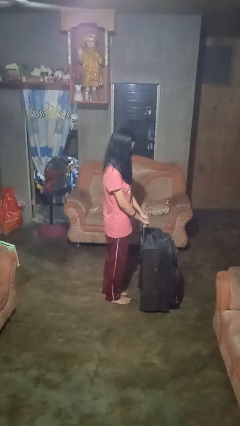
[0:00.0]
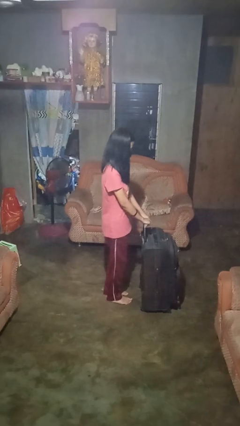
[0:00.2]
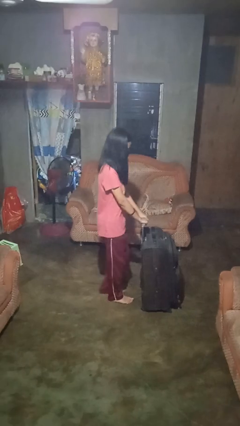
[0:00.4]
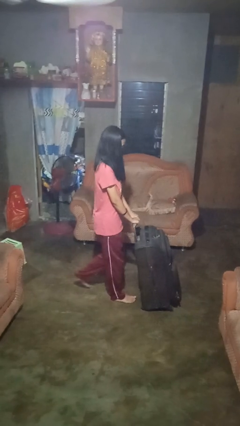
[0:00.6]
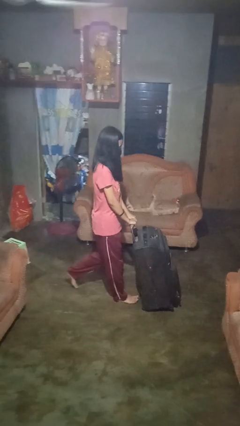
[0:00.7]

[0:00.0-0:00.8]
person pulls wheeled cart

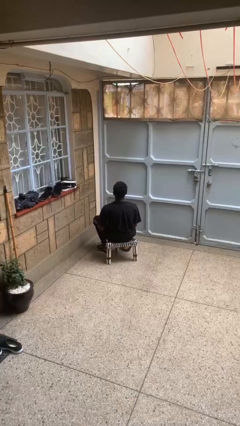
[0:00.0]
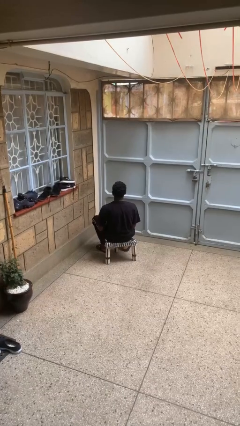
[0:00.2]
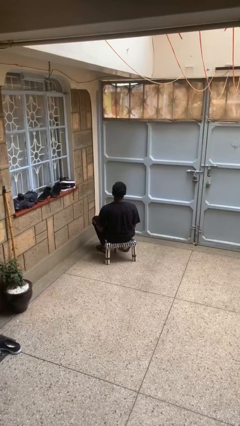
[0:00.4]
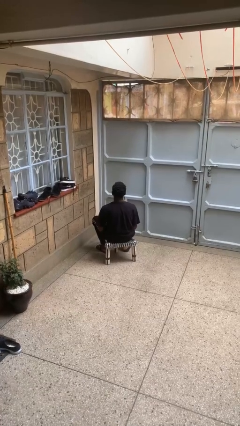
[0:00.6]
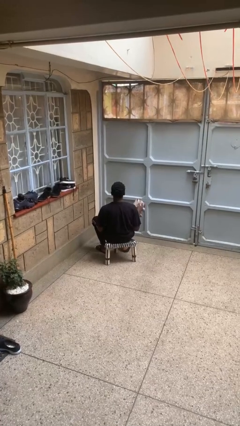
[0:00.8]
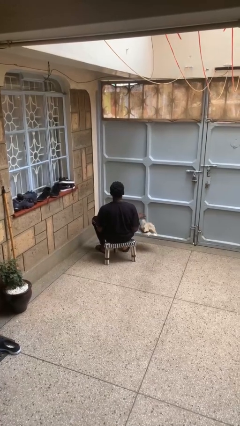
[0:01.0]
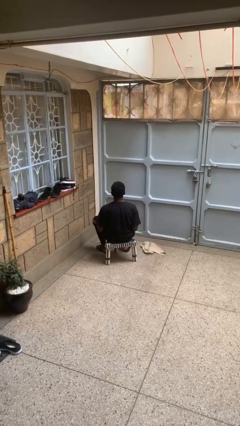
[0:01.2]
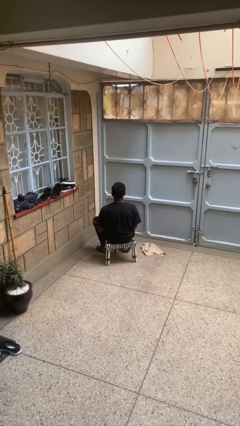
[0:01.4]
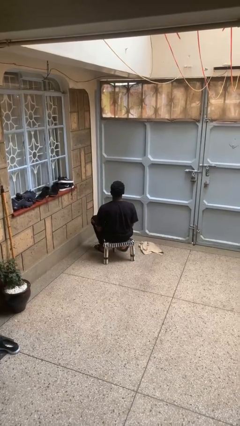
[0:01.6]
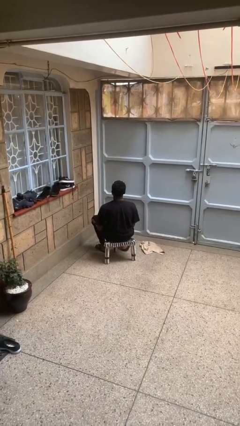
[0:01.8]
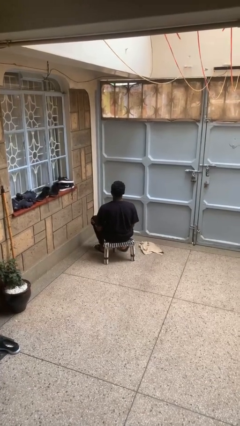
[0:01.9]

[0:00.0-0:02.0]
person throws object to ground

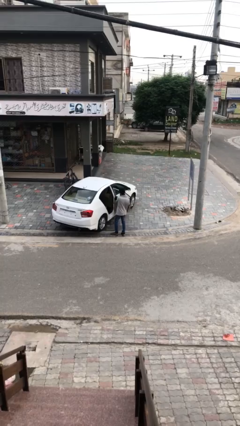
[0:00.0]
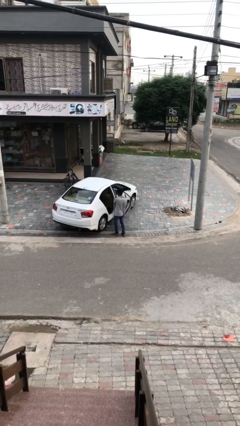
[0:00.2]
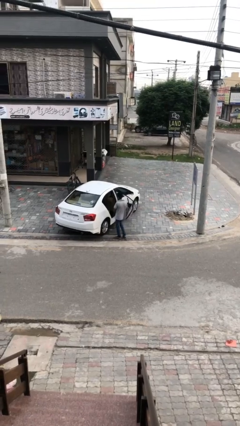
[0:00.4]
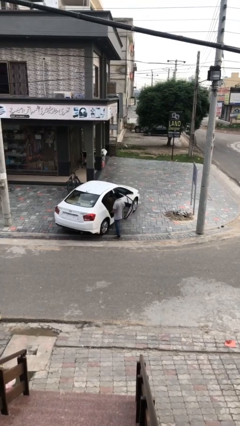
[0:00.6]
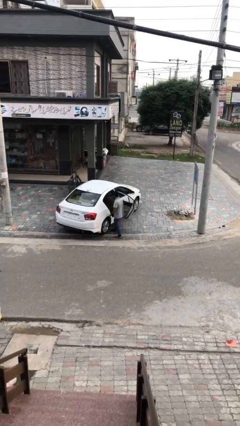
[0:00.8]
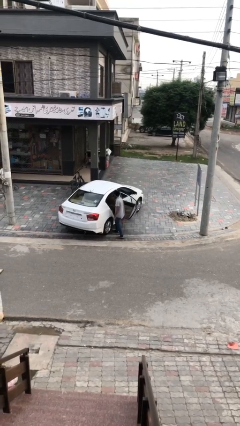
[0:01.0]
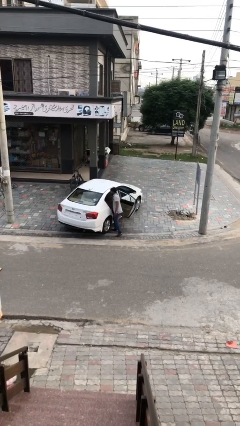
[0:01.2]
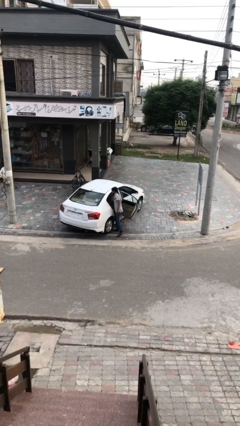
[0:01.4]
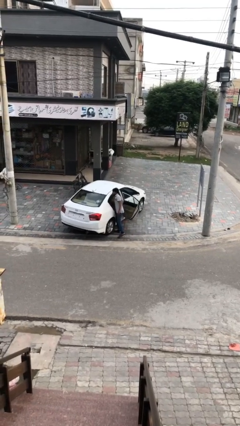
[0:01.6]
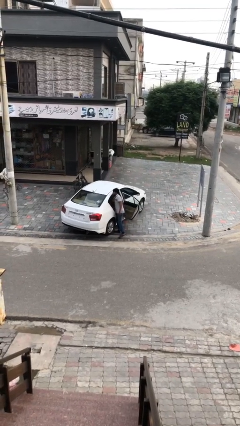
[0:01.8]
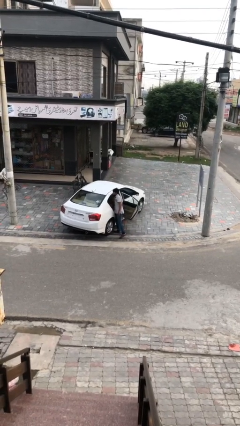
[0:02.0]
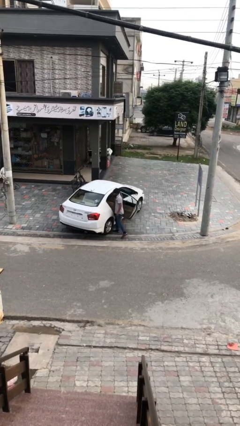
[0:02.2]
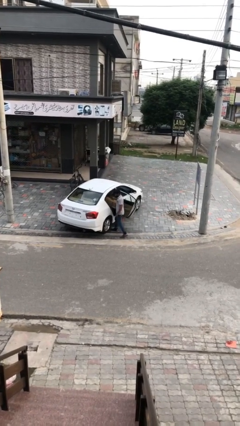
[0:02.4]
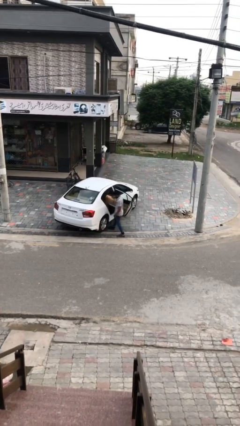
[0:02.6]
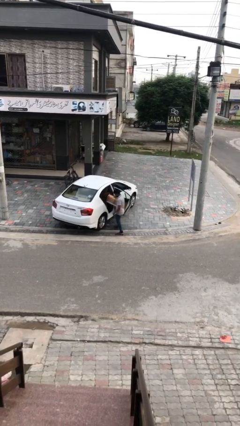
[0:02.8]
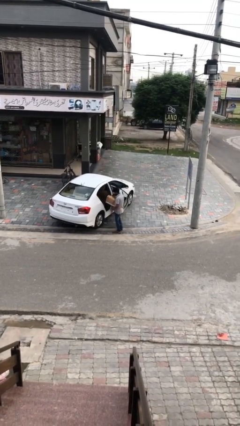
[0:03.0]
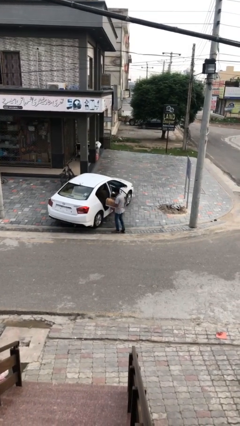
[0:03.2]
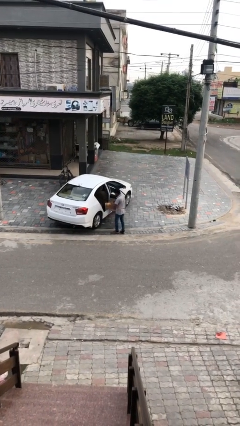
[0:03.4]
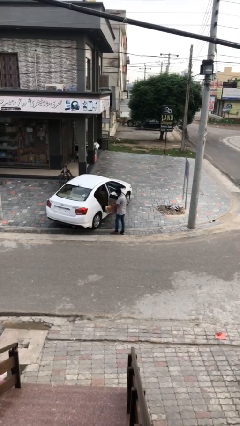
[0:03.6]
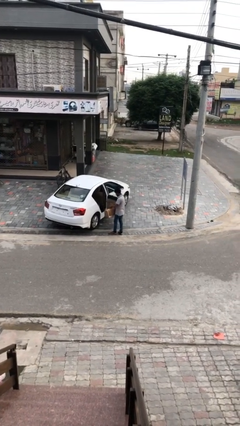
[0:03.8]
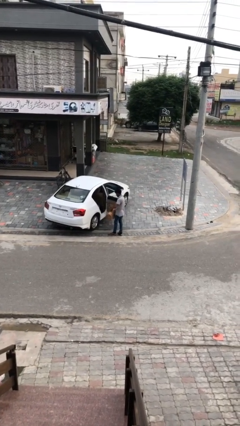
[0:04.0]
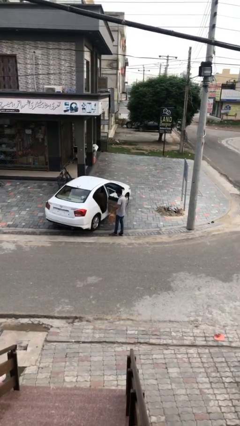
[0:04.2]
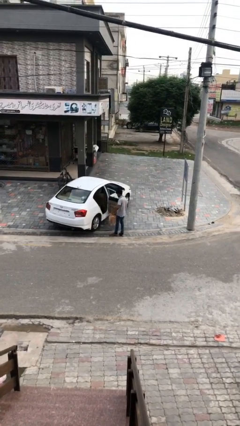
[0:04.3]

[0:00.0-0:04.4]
person unloads car

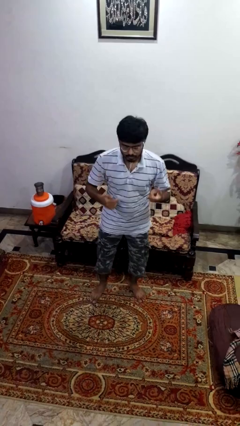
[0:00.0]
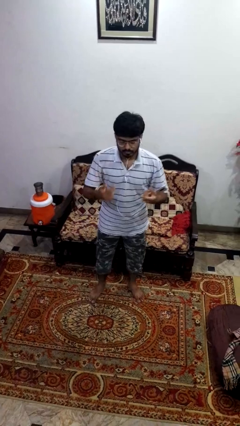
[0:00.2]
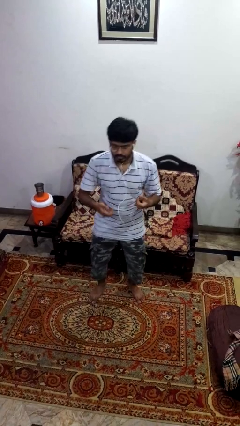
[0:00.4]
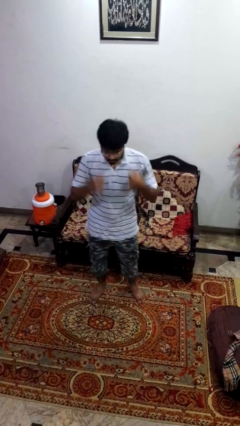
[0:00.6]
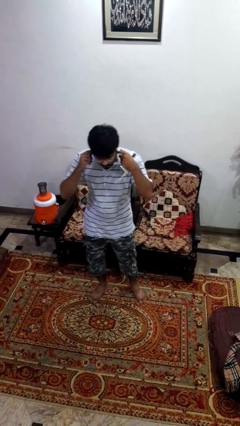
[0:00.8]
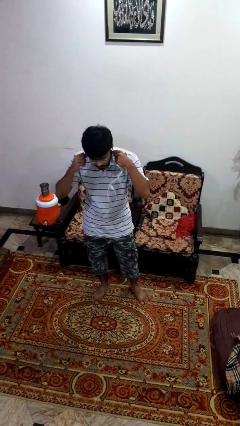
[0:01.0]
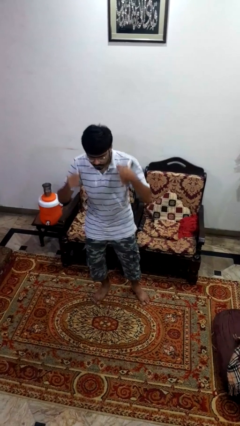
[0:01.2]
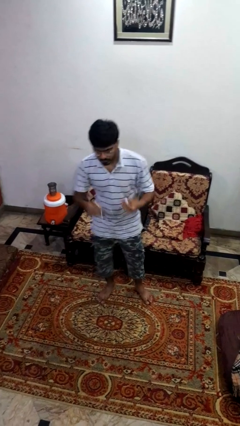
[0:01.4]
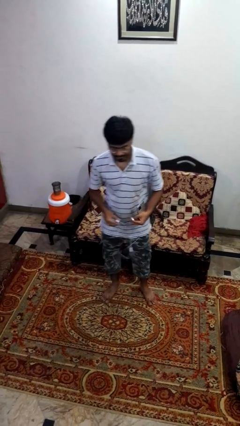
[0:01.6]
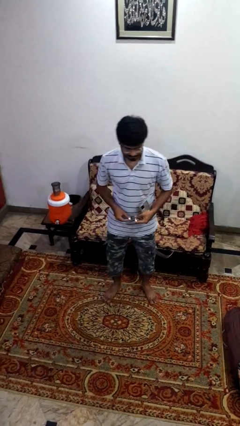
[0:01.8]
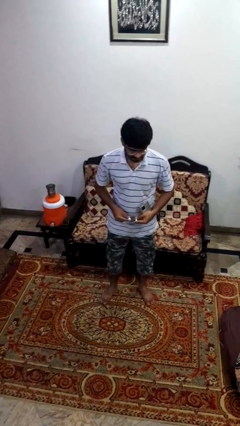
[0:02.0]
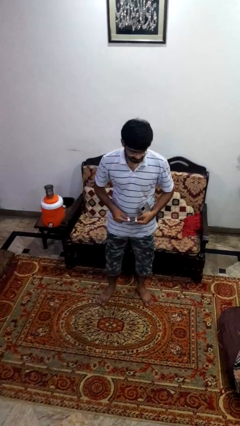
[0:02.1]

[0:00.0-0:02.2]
person takes off headphones

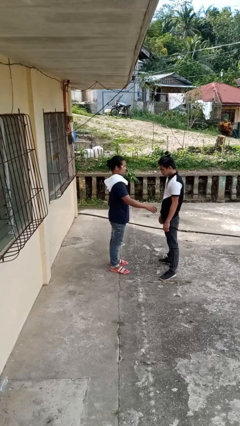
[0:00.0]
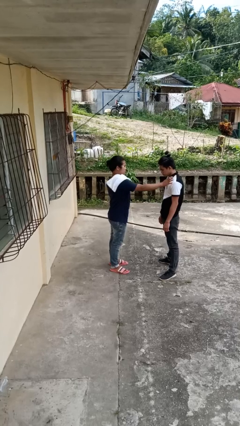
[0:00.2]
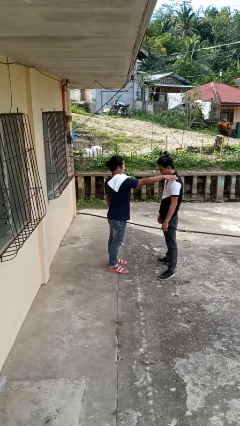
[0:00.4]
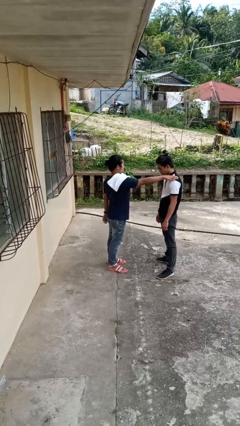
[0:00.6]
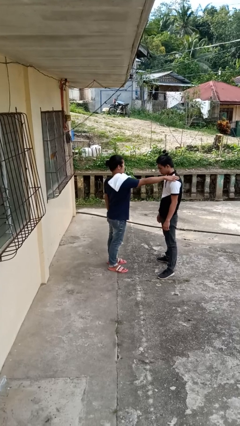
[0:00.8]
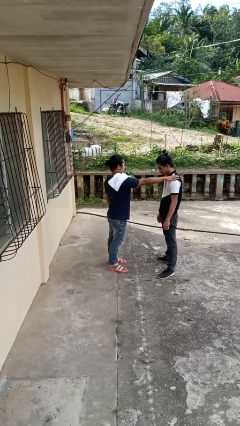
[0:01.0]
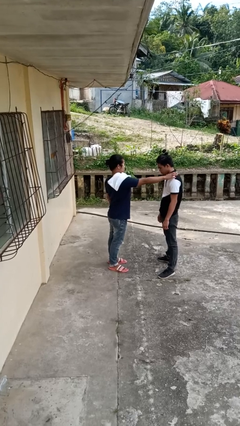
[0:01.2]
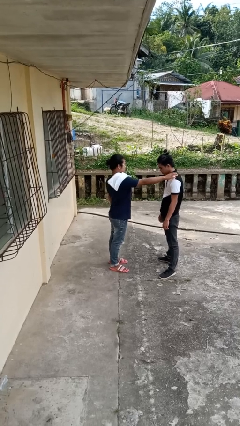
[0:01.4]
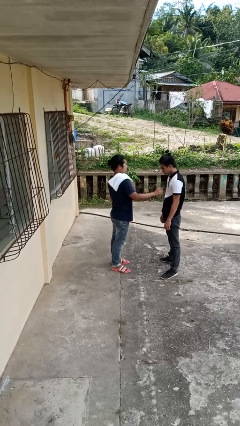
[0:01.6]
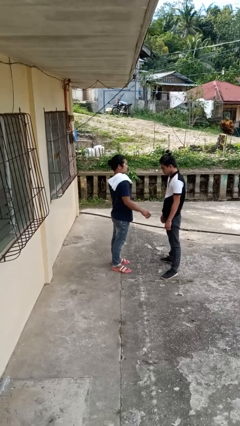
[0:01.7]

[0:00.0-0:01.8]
person pounds shoulders of person

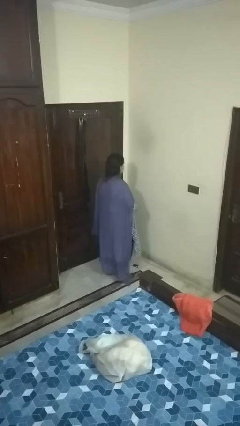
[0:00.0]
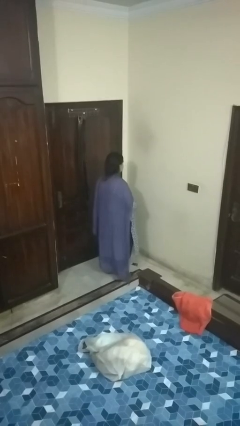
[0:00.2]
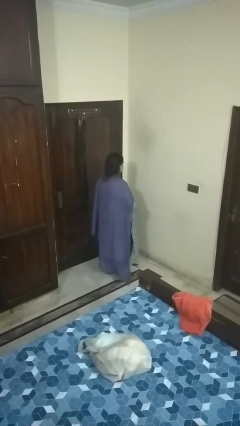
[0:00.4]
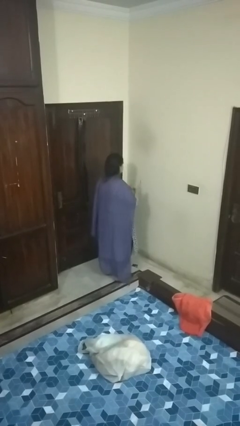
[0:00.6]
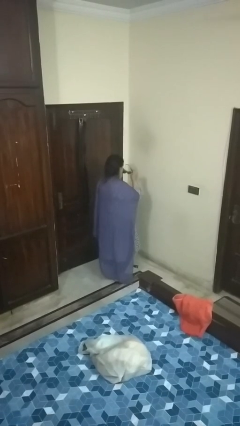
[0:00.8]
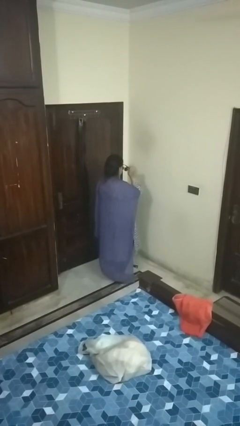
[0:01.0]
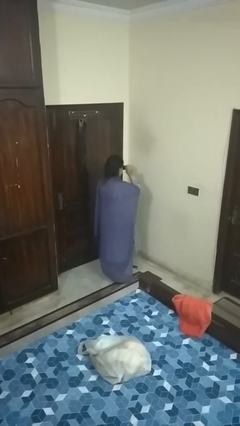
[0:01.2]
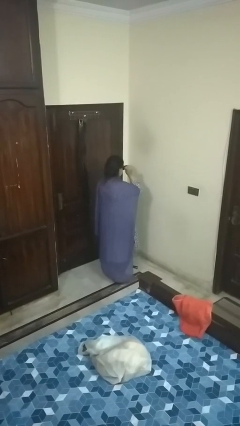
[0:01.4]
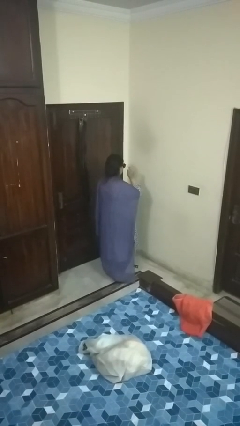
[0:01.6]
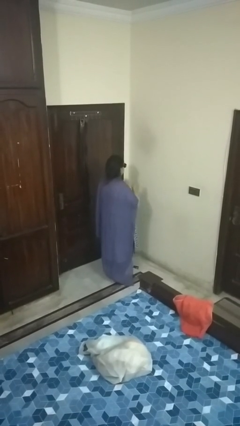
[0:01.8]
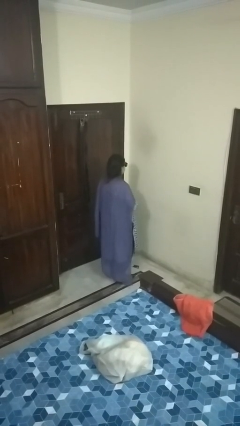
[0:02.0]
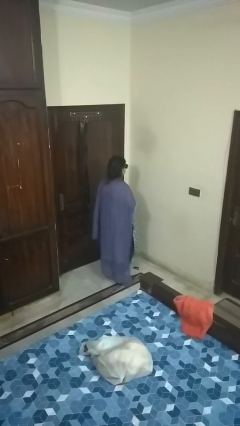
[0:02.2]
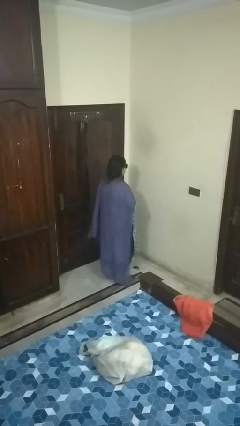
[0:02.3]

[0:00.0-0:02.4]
person puts on sunglasses

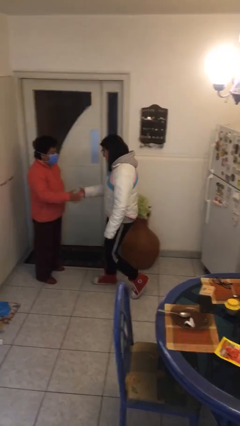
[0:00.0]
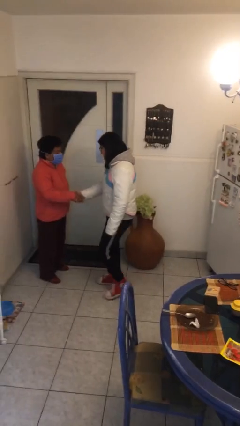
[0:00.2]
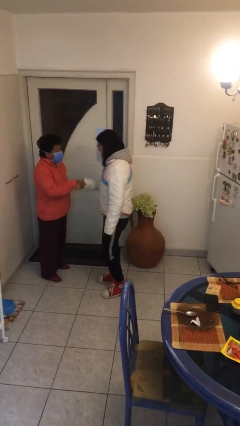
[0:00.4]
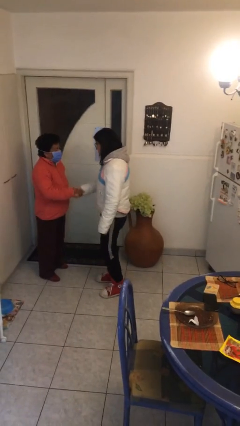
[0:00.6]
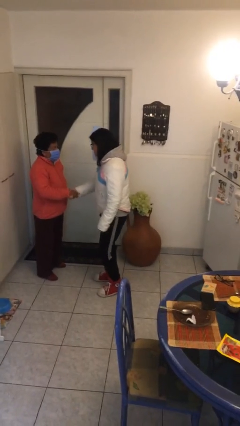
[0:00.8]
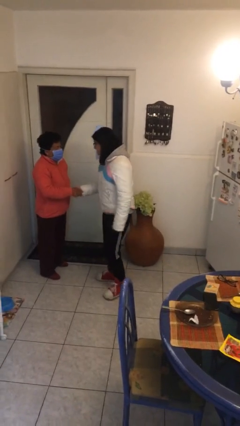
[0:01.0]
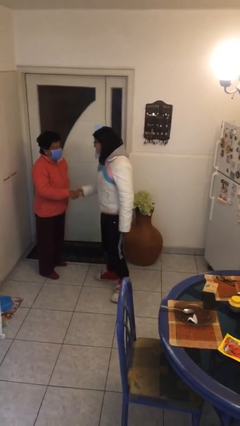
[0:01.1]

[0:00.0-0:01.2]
person shakes hand

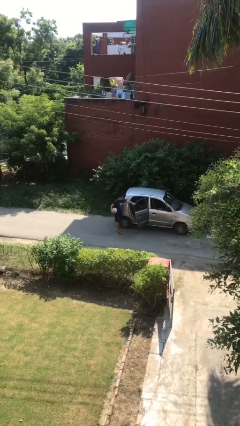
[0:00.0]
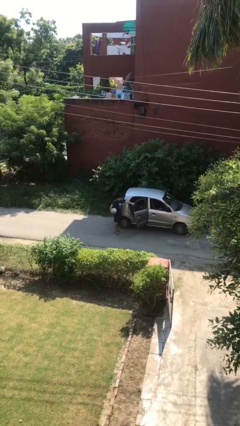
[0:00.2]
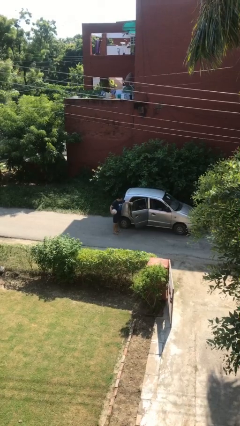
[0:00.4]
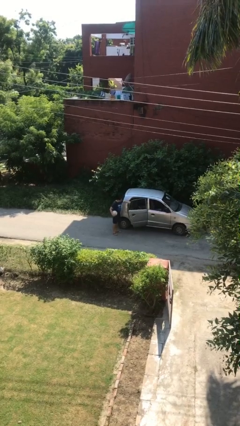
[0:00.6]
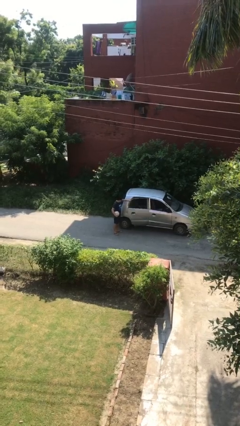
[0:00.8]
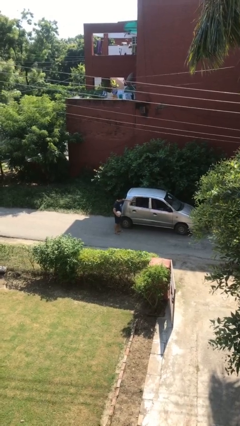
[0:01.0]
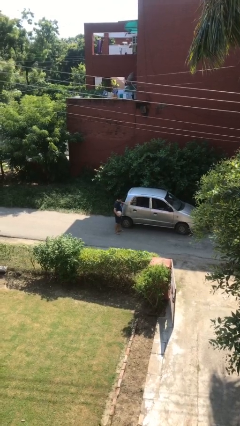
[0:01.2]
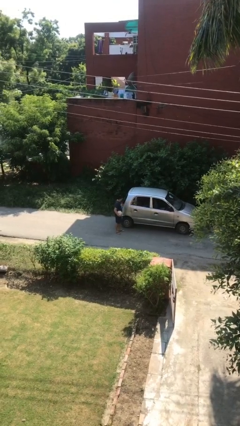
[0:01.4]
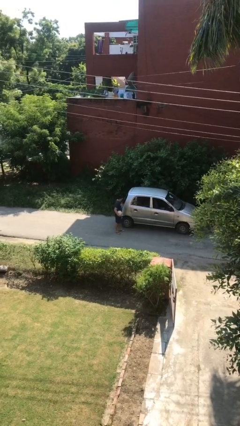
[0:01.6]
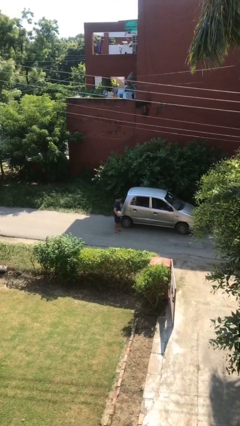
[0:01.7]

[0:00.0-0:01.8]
person closes car door
